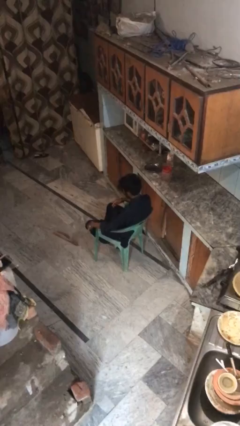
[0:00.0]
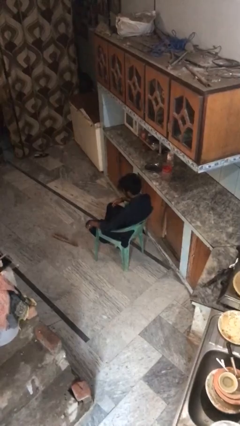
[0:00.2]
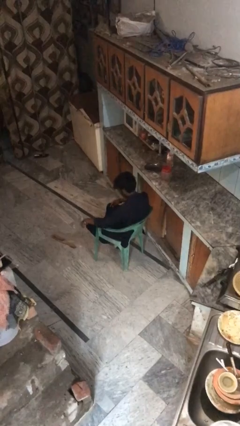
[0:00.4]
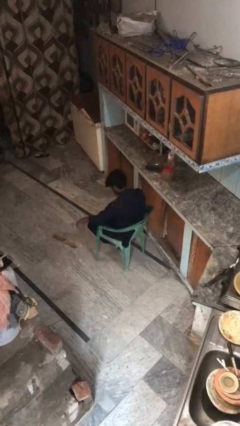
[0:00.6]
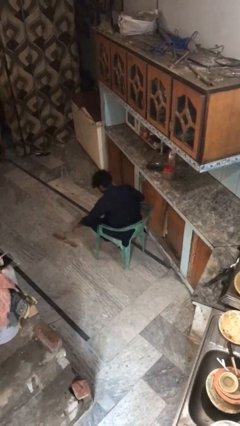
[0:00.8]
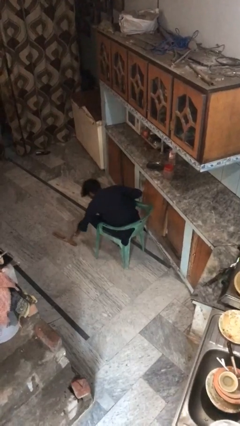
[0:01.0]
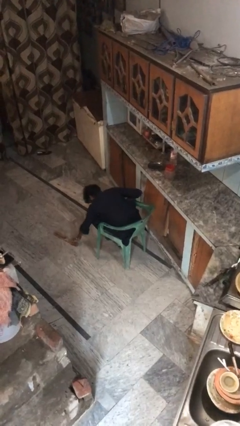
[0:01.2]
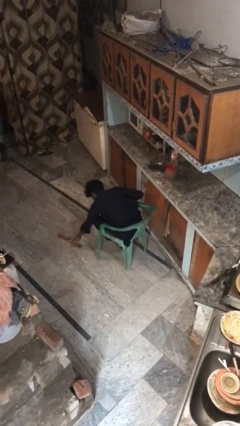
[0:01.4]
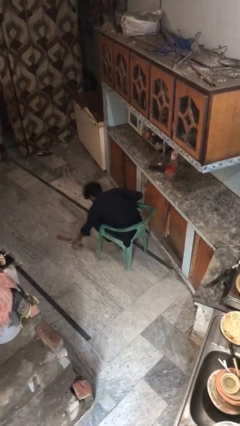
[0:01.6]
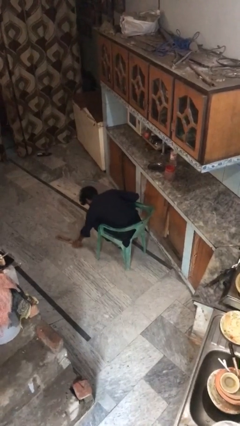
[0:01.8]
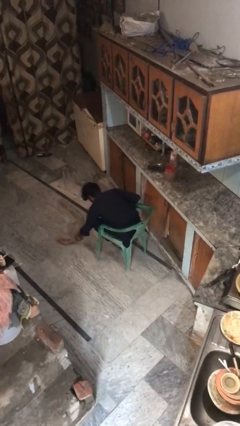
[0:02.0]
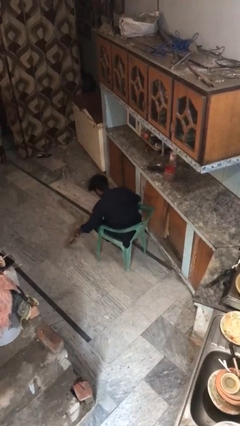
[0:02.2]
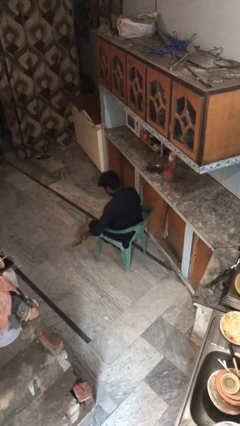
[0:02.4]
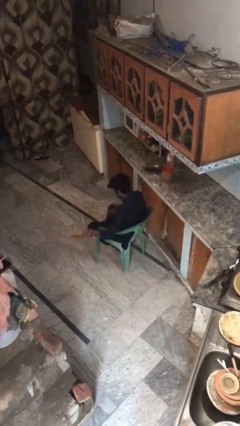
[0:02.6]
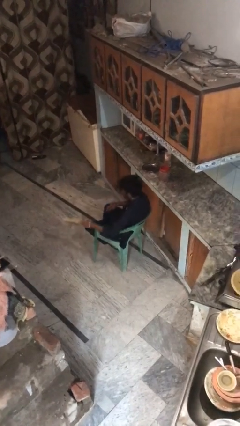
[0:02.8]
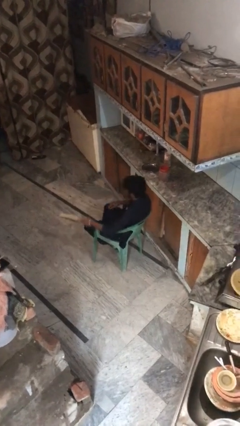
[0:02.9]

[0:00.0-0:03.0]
person picks up object from floor

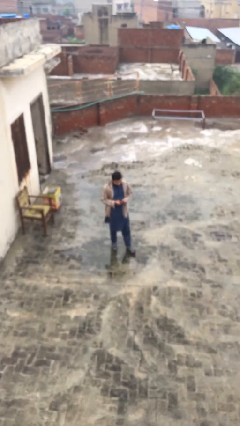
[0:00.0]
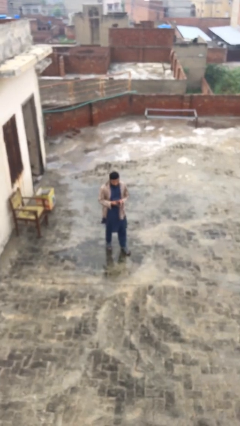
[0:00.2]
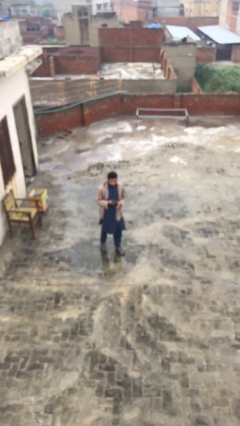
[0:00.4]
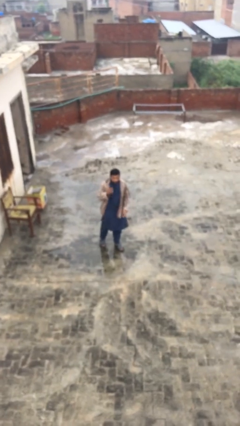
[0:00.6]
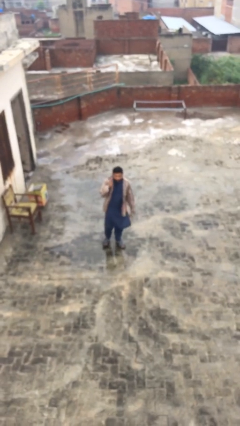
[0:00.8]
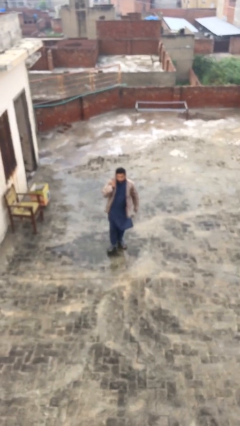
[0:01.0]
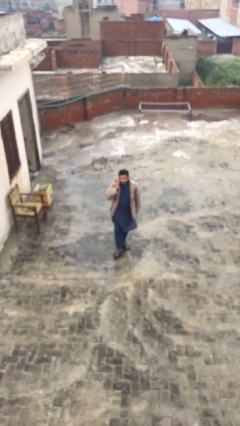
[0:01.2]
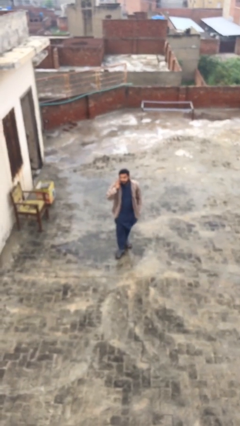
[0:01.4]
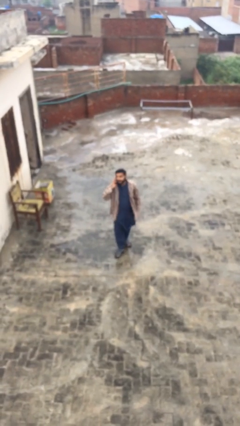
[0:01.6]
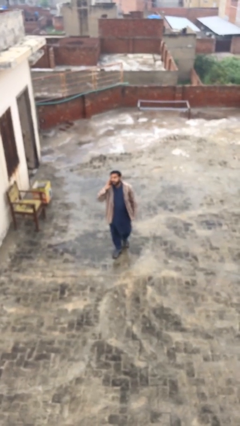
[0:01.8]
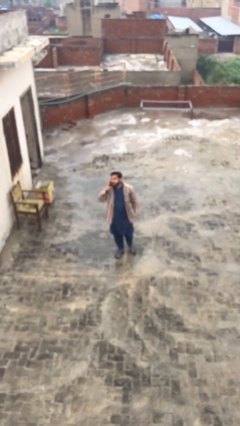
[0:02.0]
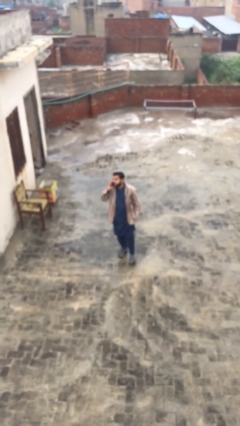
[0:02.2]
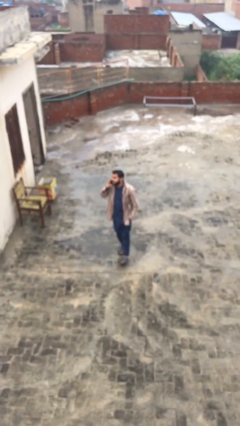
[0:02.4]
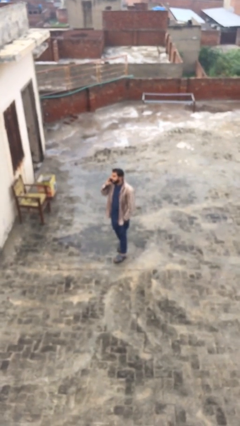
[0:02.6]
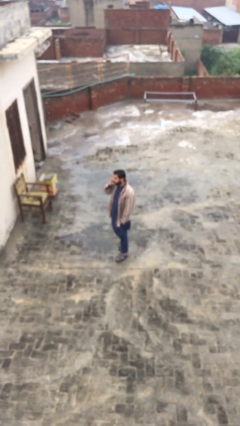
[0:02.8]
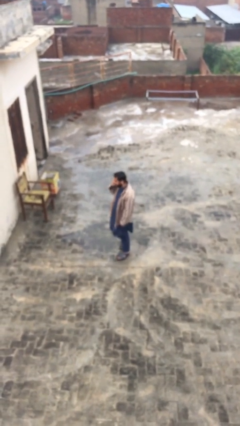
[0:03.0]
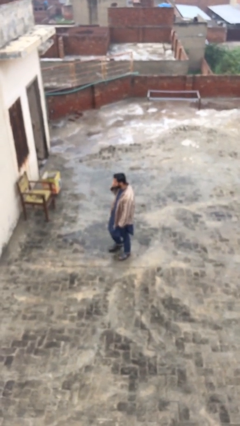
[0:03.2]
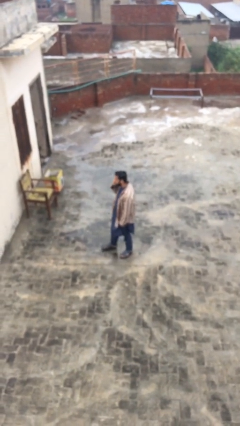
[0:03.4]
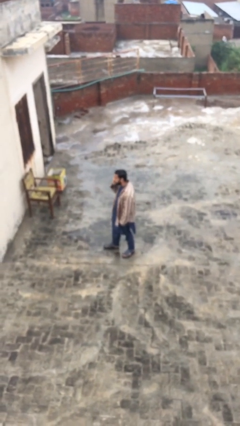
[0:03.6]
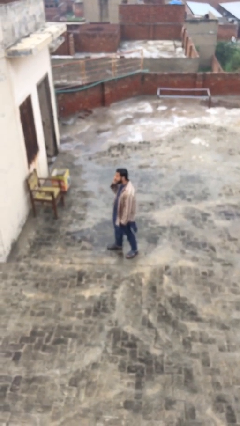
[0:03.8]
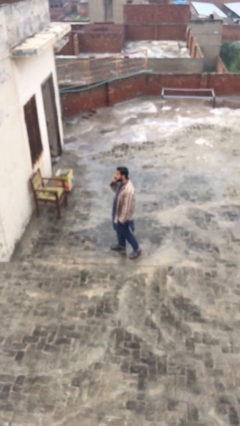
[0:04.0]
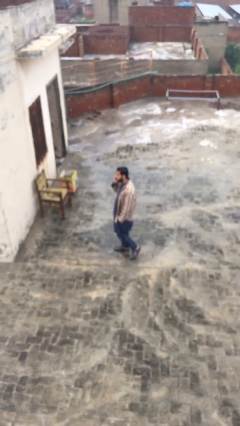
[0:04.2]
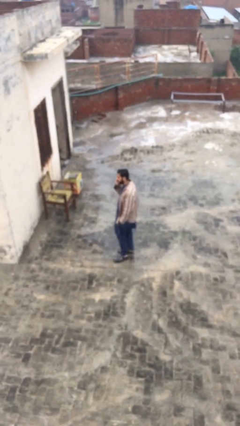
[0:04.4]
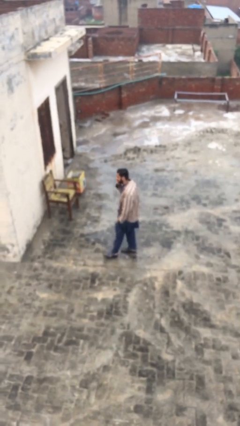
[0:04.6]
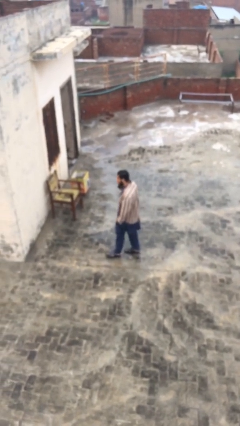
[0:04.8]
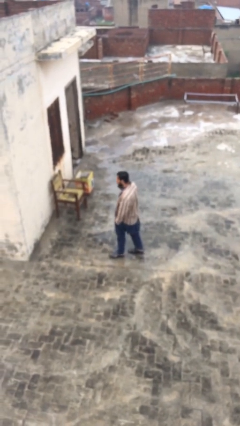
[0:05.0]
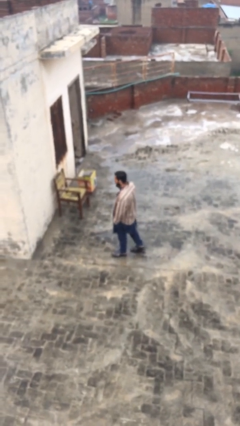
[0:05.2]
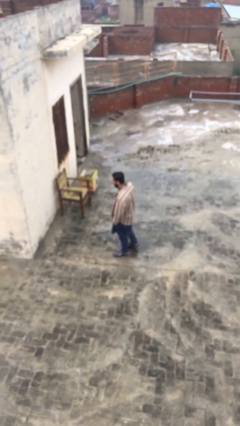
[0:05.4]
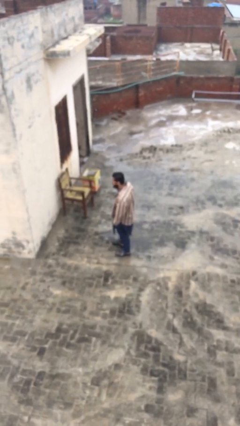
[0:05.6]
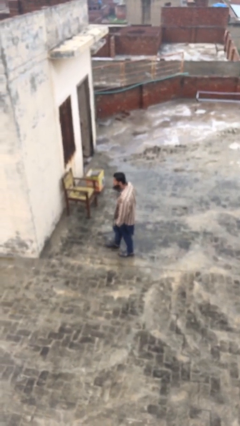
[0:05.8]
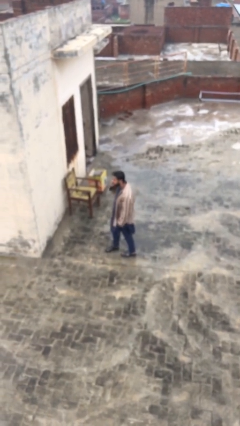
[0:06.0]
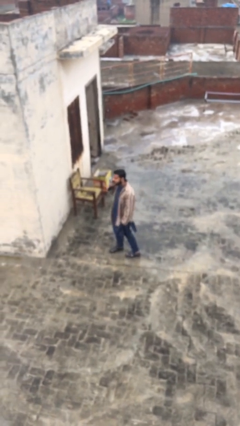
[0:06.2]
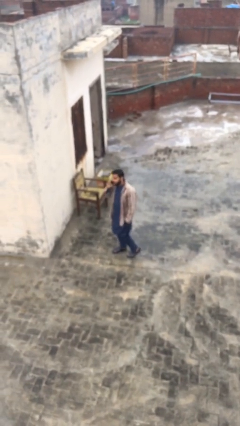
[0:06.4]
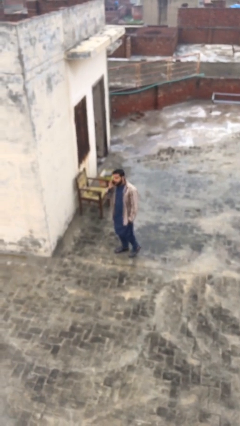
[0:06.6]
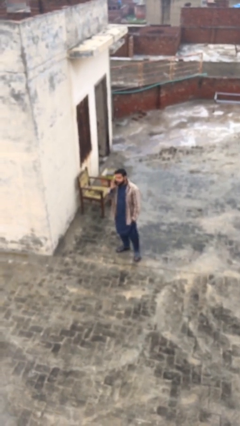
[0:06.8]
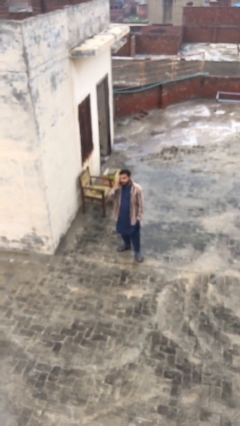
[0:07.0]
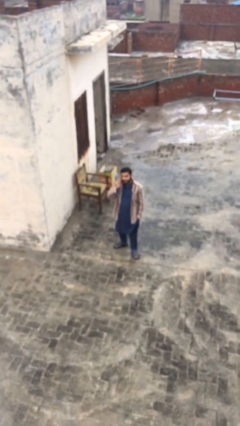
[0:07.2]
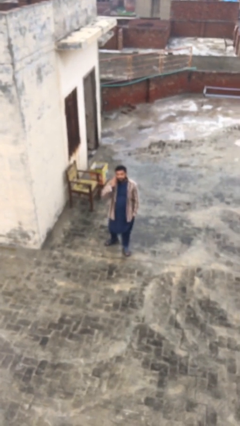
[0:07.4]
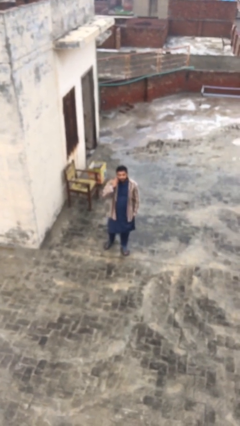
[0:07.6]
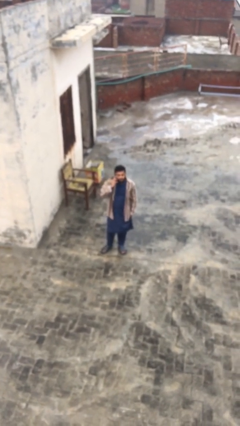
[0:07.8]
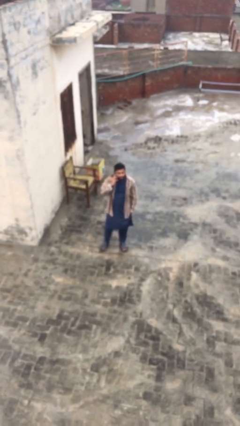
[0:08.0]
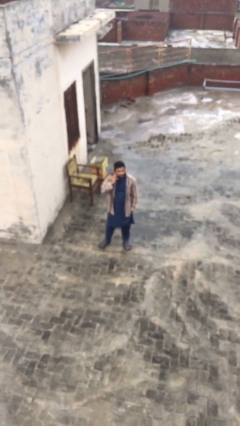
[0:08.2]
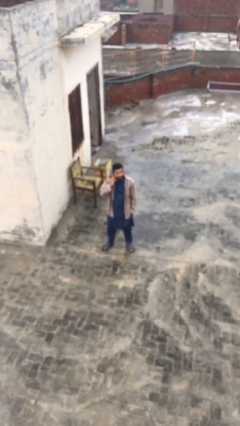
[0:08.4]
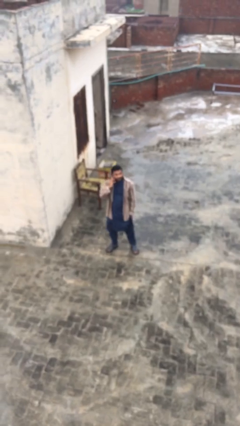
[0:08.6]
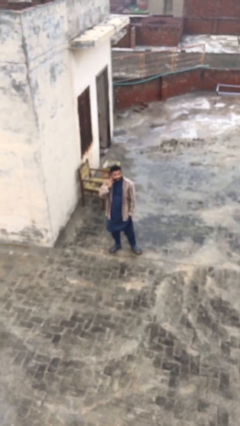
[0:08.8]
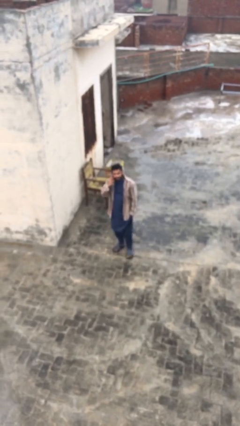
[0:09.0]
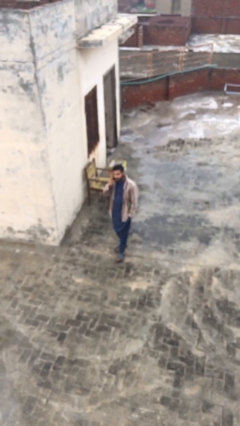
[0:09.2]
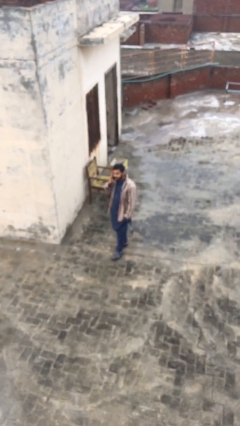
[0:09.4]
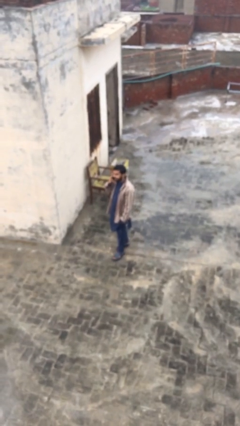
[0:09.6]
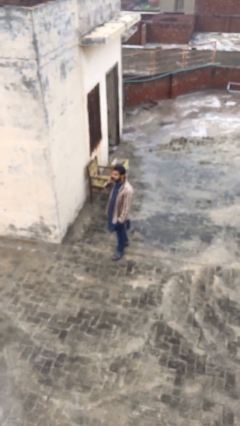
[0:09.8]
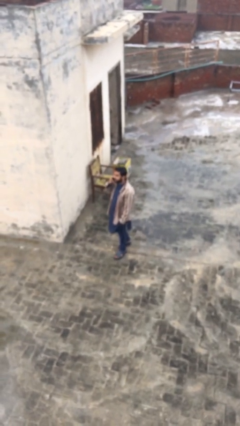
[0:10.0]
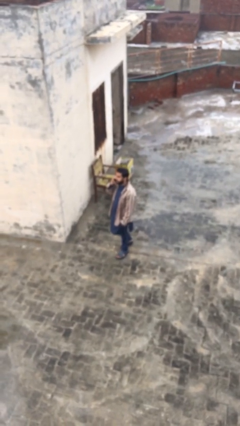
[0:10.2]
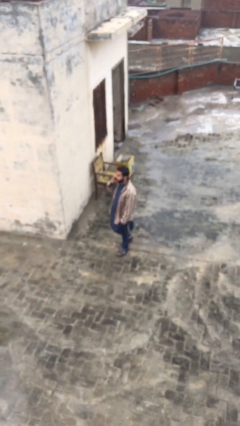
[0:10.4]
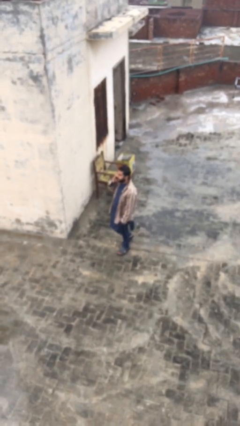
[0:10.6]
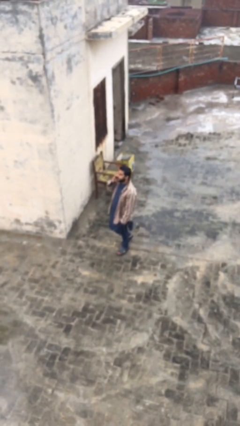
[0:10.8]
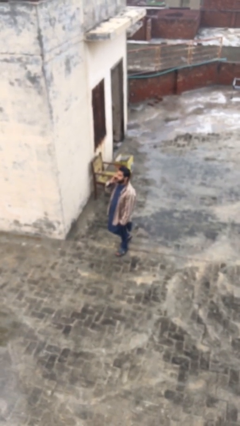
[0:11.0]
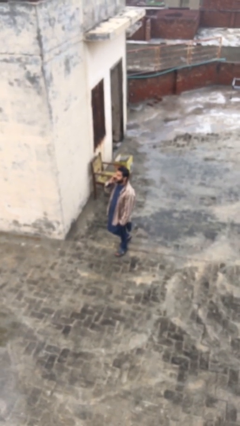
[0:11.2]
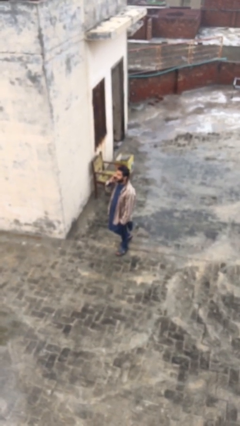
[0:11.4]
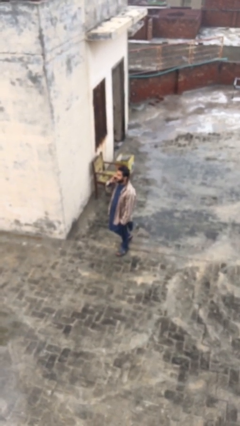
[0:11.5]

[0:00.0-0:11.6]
person talks on phone

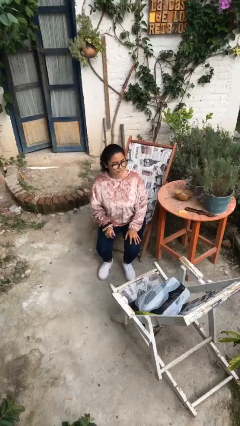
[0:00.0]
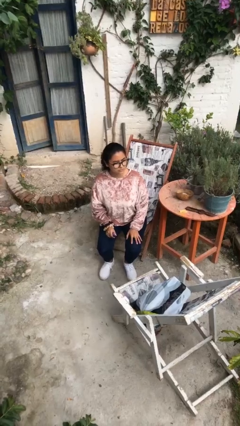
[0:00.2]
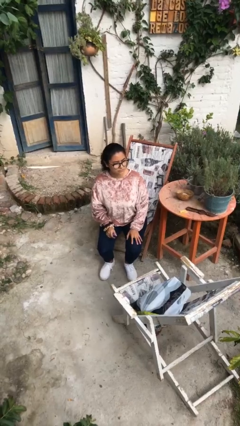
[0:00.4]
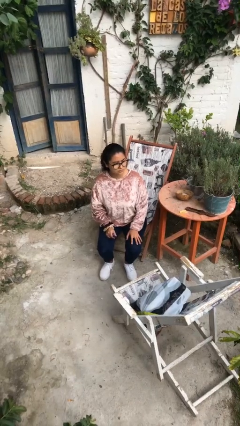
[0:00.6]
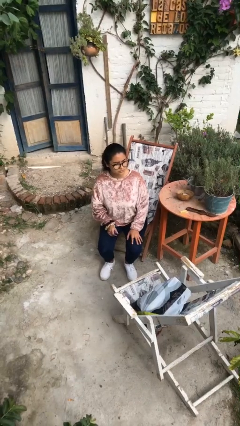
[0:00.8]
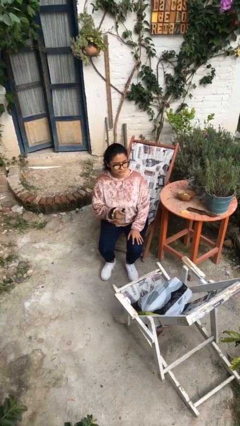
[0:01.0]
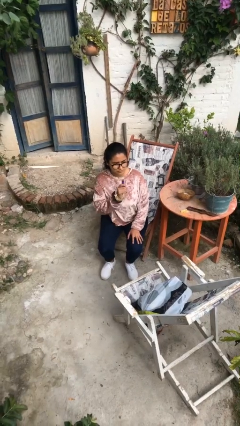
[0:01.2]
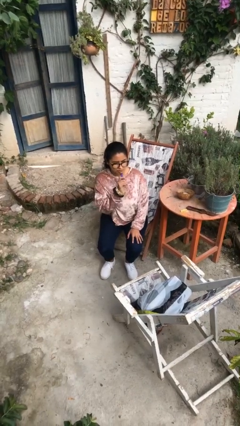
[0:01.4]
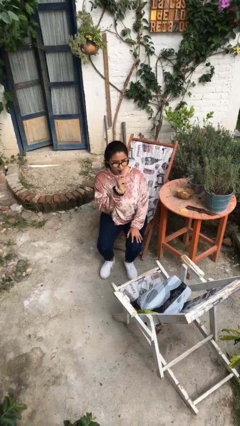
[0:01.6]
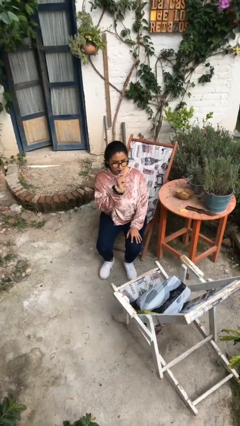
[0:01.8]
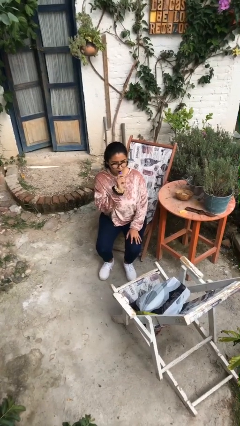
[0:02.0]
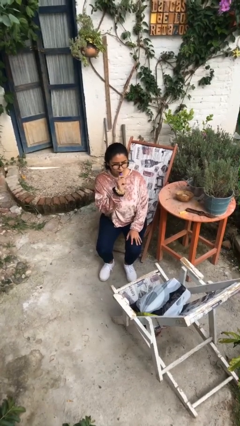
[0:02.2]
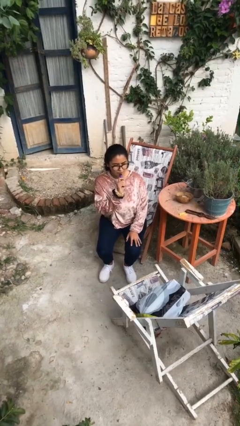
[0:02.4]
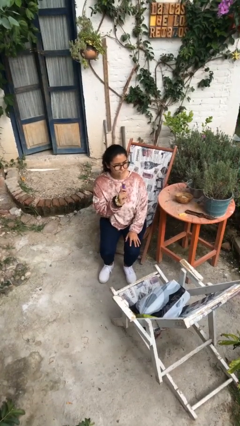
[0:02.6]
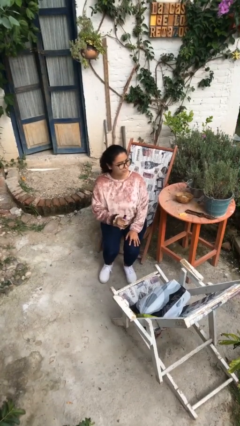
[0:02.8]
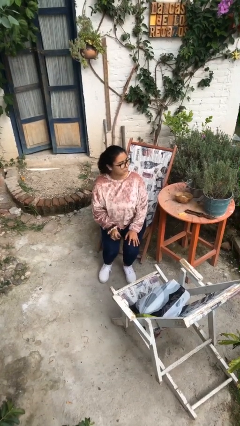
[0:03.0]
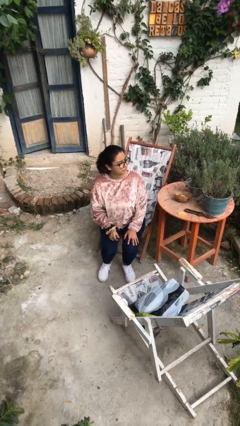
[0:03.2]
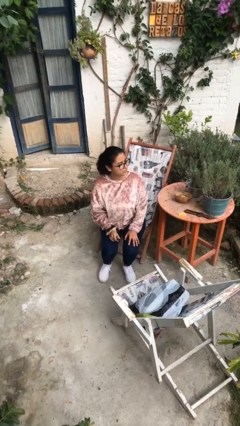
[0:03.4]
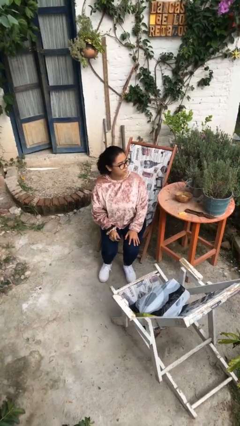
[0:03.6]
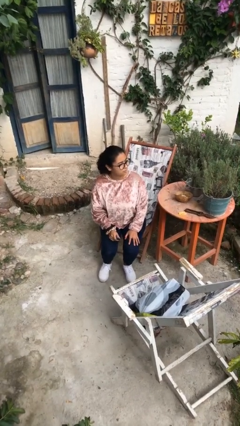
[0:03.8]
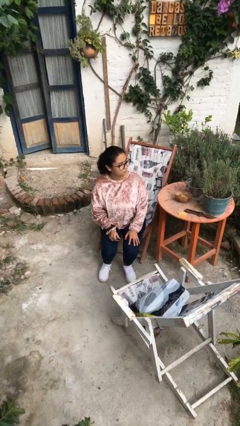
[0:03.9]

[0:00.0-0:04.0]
person vapes
